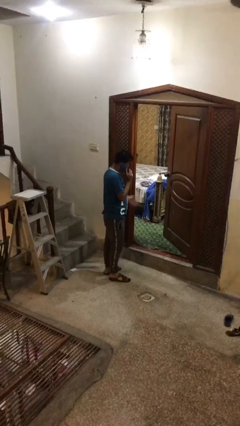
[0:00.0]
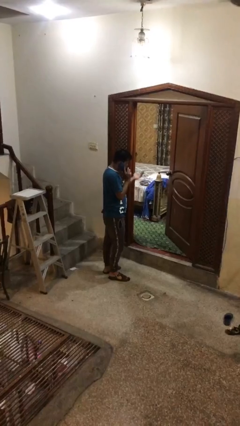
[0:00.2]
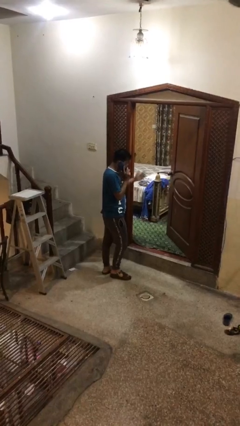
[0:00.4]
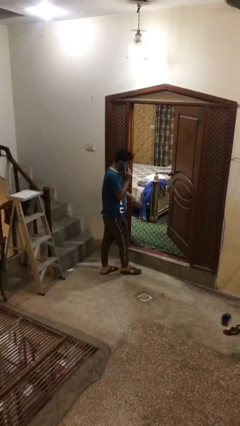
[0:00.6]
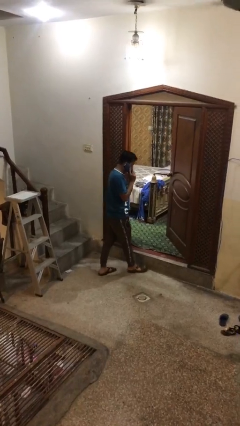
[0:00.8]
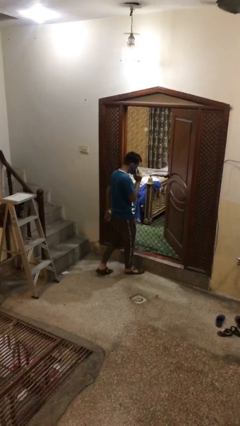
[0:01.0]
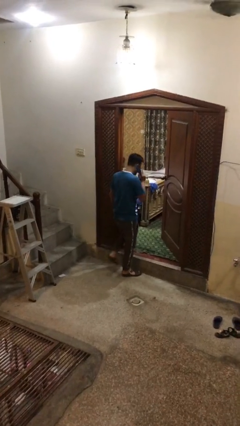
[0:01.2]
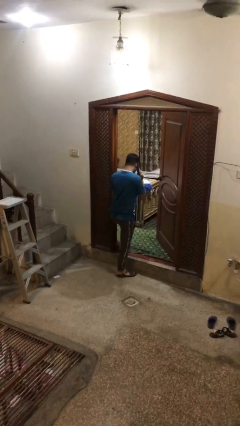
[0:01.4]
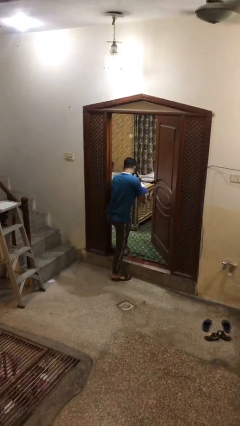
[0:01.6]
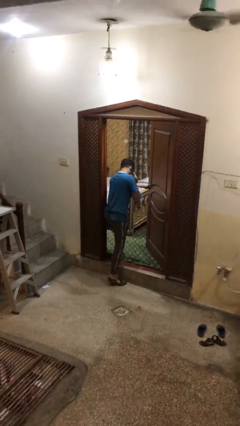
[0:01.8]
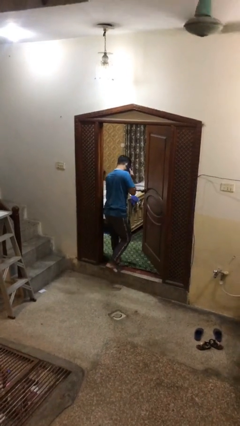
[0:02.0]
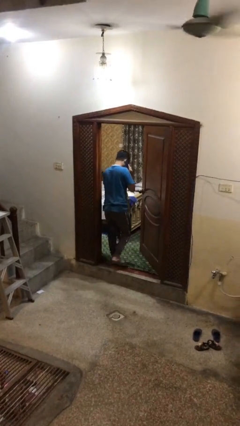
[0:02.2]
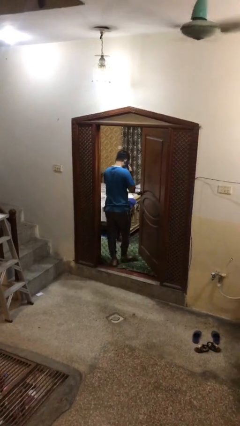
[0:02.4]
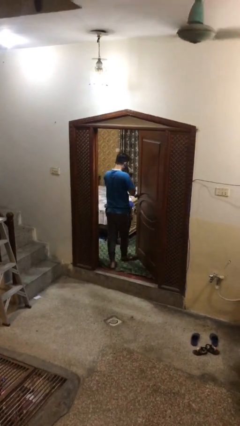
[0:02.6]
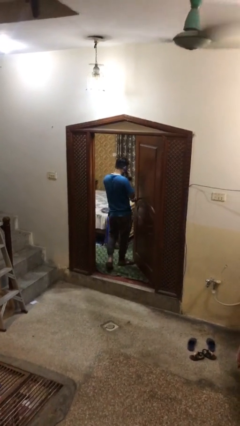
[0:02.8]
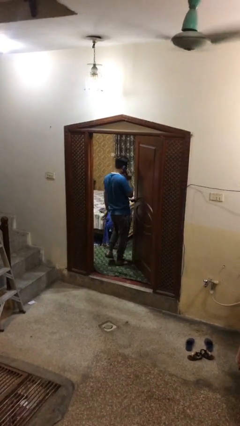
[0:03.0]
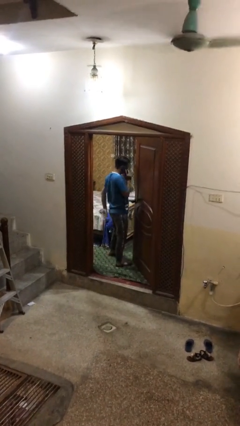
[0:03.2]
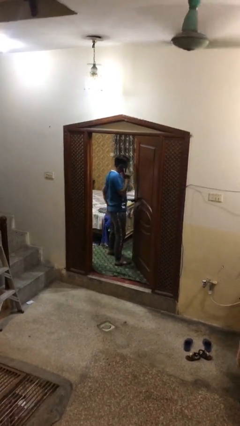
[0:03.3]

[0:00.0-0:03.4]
person exits scene through structure

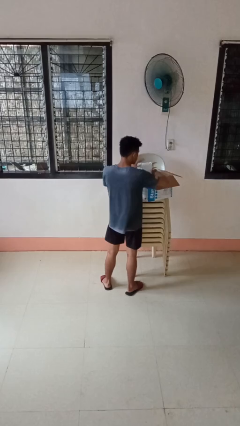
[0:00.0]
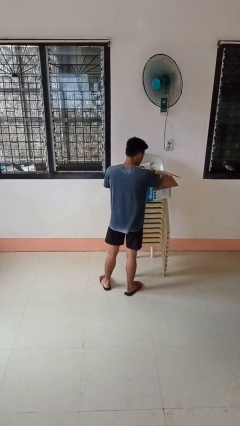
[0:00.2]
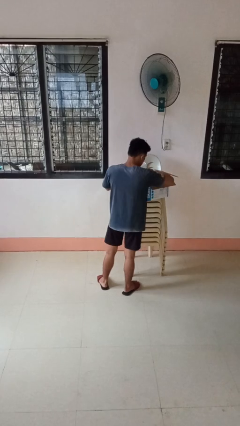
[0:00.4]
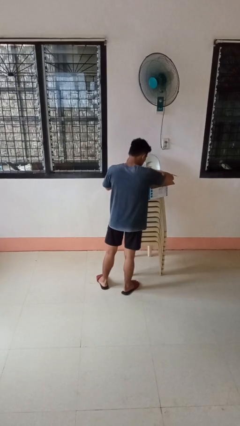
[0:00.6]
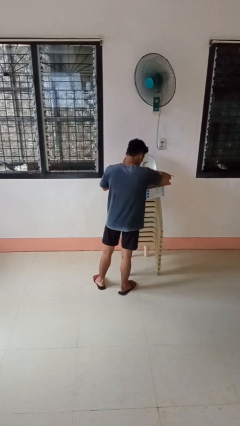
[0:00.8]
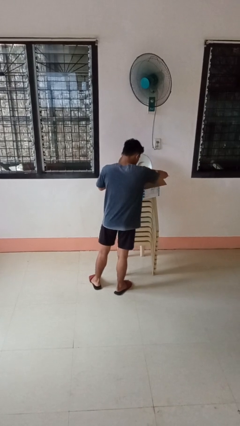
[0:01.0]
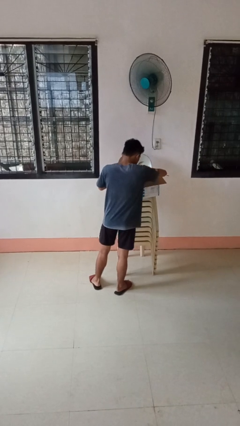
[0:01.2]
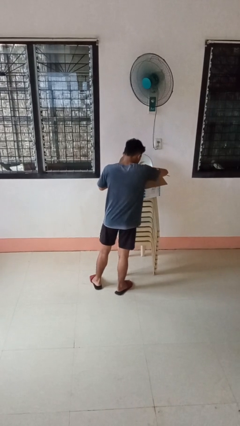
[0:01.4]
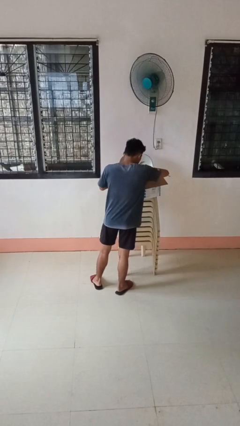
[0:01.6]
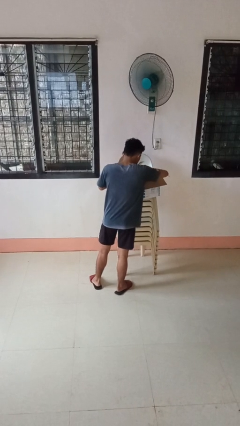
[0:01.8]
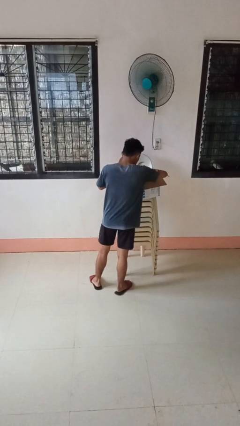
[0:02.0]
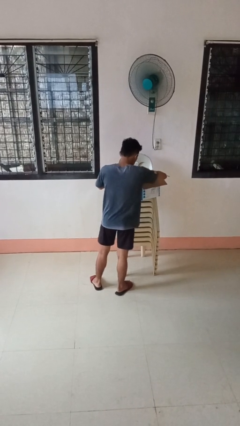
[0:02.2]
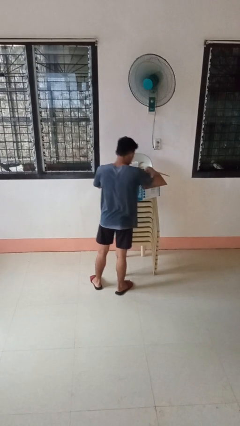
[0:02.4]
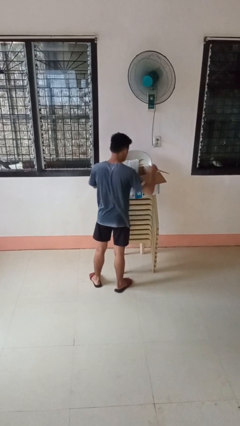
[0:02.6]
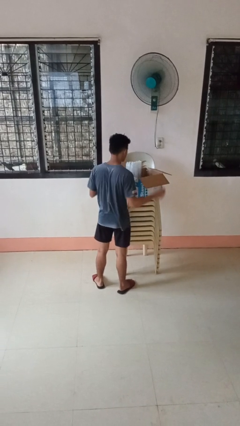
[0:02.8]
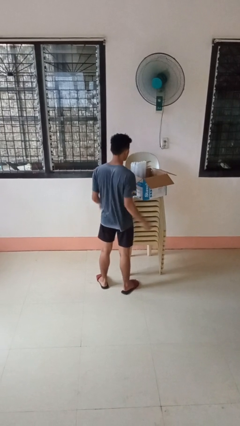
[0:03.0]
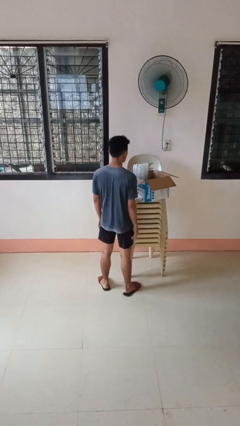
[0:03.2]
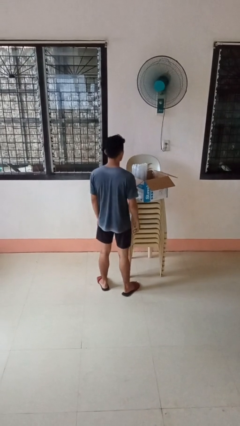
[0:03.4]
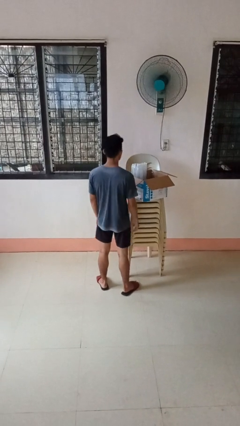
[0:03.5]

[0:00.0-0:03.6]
person searches in box

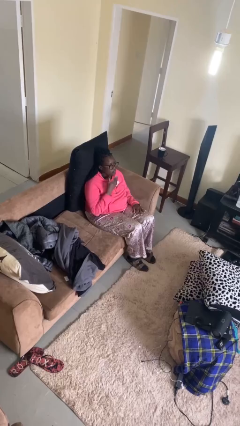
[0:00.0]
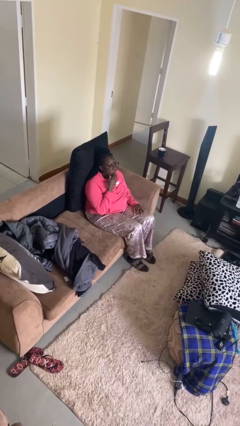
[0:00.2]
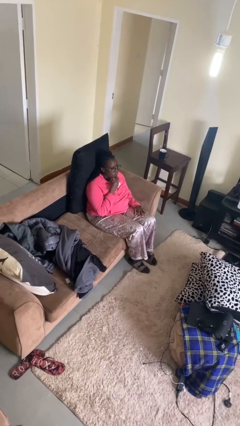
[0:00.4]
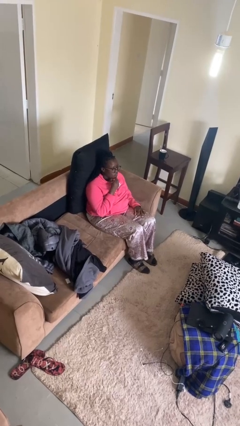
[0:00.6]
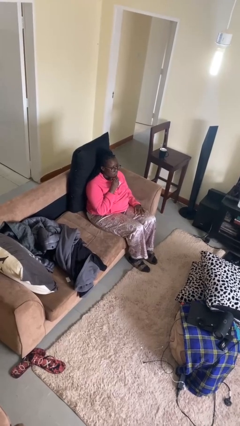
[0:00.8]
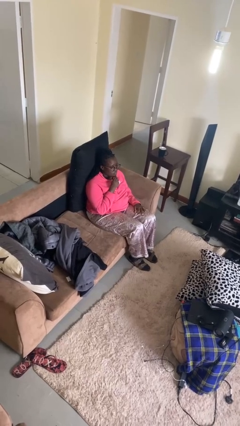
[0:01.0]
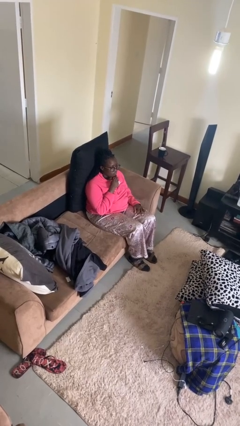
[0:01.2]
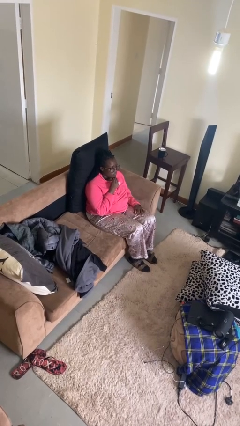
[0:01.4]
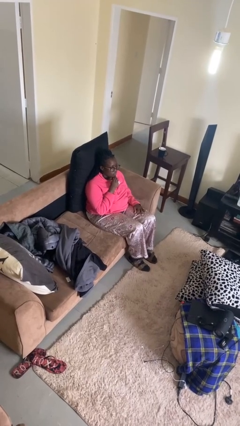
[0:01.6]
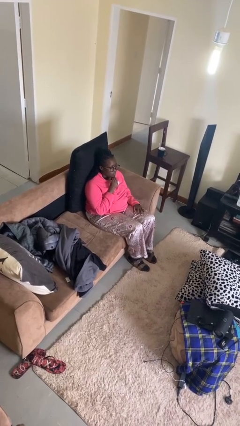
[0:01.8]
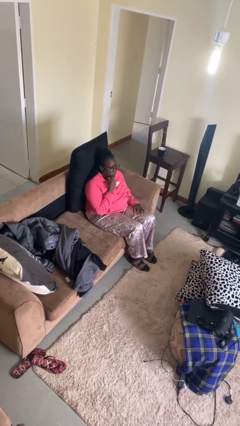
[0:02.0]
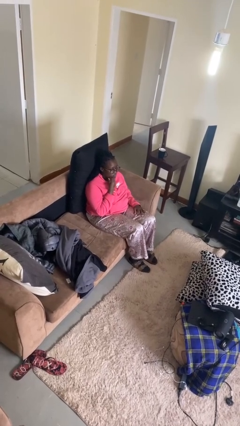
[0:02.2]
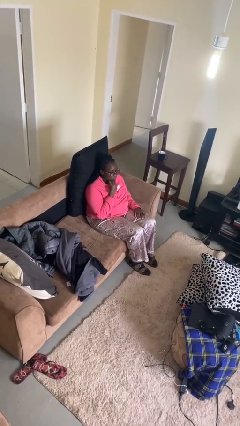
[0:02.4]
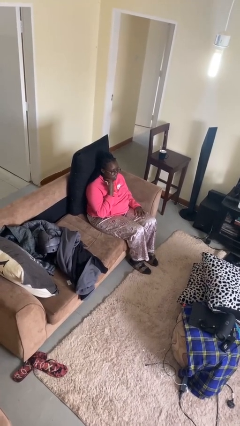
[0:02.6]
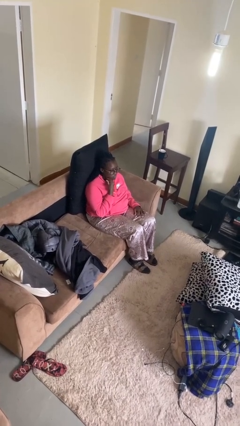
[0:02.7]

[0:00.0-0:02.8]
person strokes chin

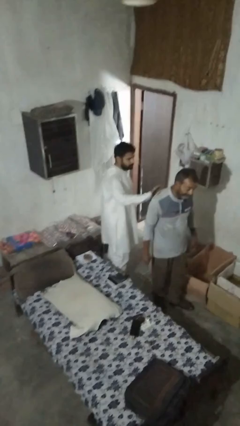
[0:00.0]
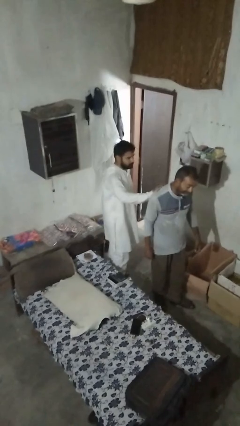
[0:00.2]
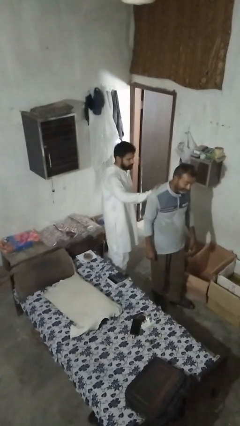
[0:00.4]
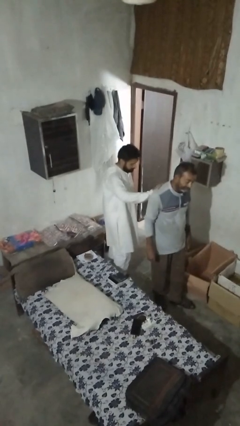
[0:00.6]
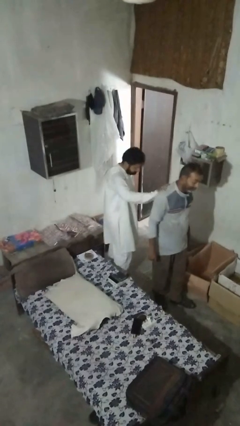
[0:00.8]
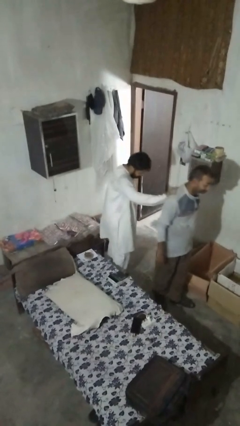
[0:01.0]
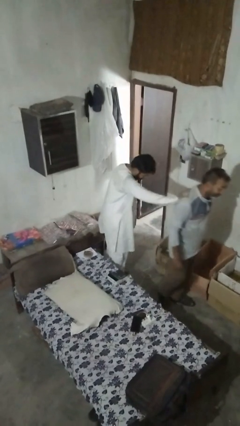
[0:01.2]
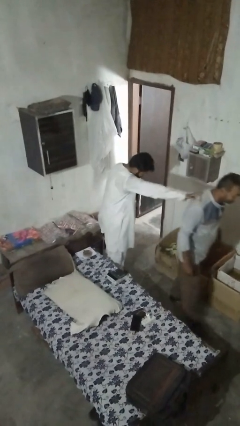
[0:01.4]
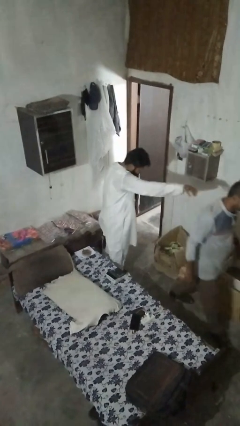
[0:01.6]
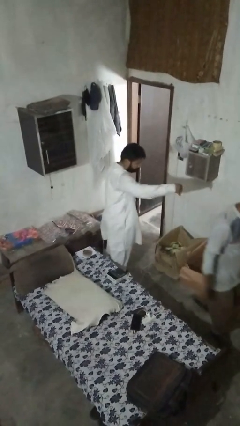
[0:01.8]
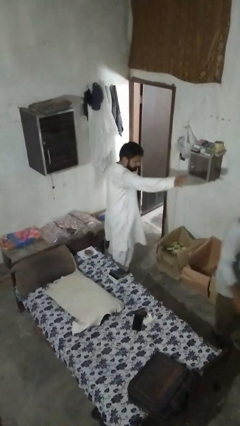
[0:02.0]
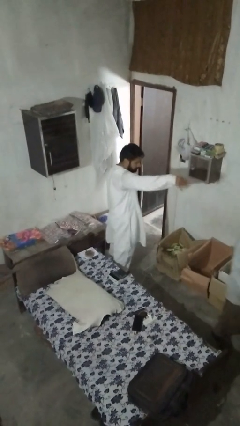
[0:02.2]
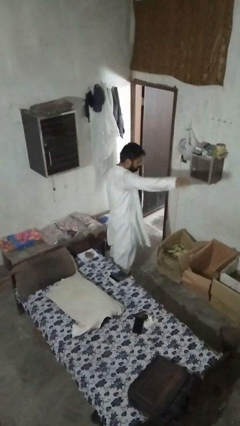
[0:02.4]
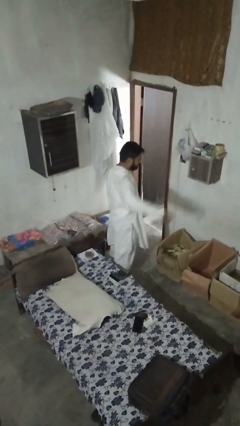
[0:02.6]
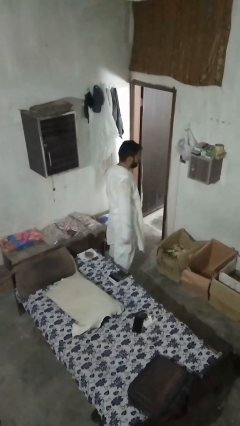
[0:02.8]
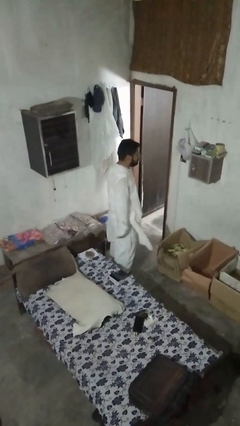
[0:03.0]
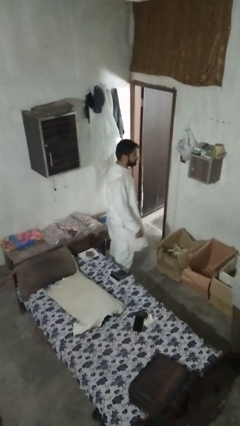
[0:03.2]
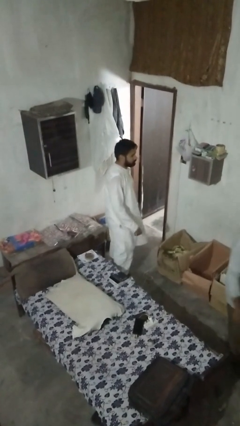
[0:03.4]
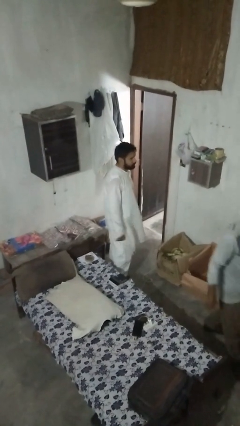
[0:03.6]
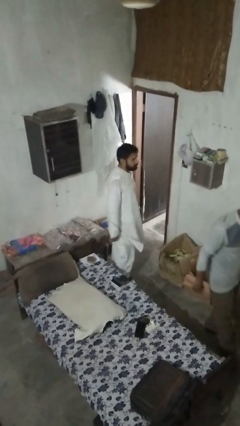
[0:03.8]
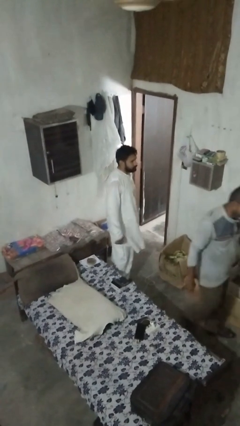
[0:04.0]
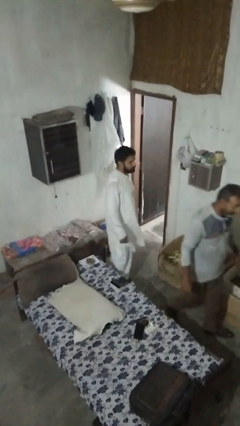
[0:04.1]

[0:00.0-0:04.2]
person shoves person

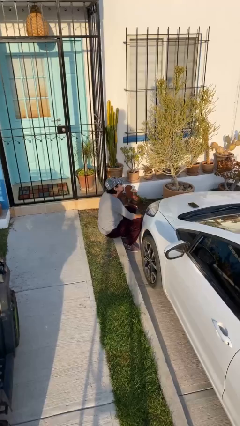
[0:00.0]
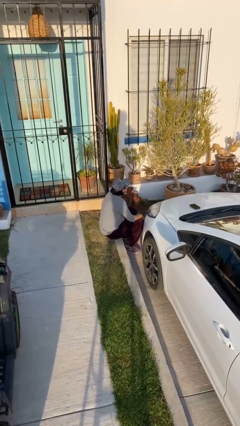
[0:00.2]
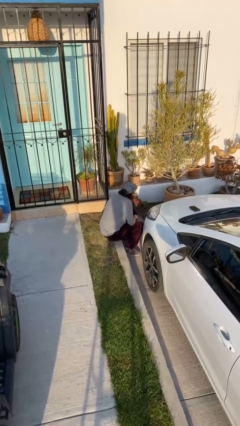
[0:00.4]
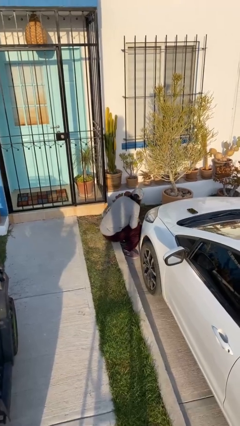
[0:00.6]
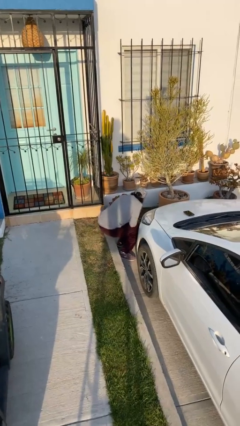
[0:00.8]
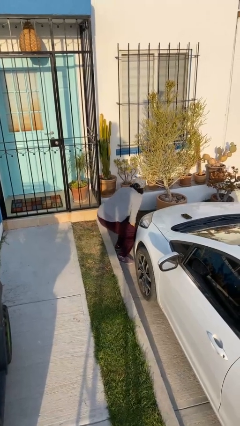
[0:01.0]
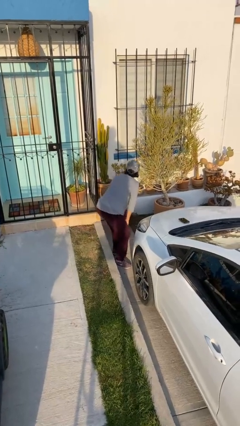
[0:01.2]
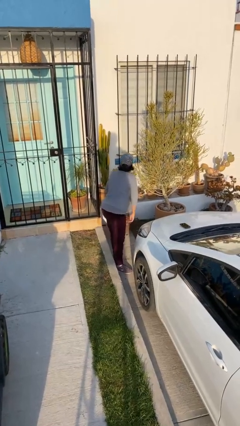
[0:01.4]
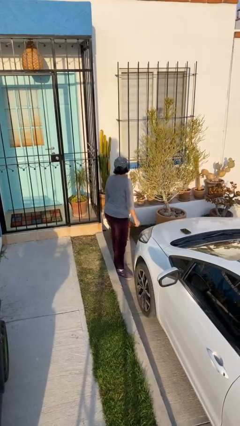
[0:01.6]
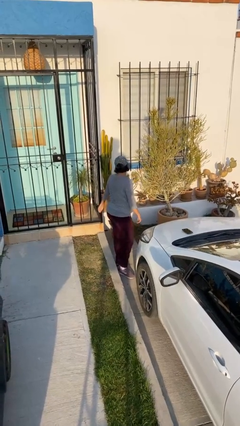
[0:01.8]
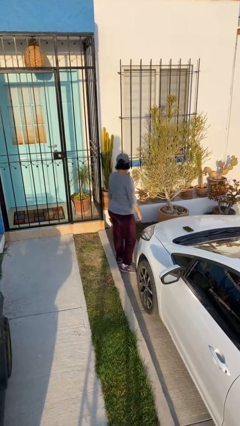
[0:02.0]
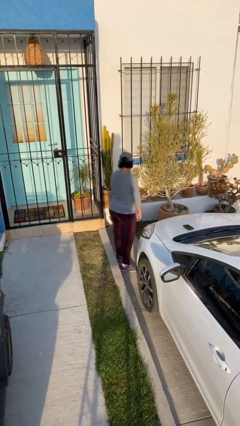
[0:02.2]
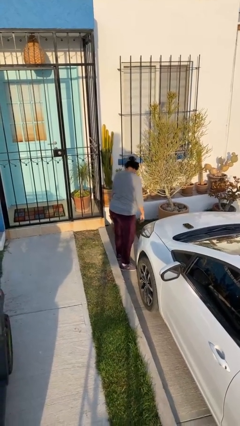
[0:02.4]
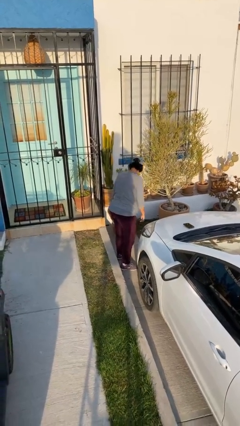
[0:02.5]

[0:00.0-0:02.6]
person stands up

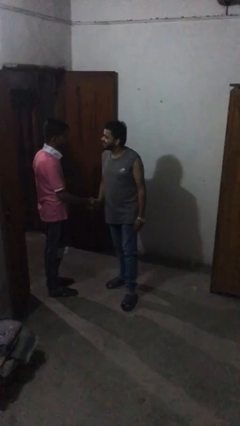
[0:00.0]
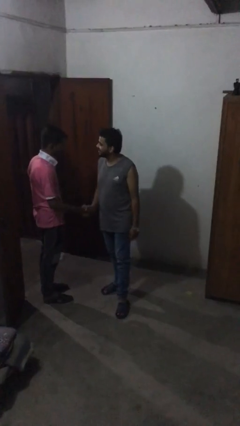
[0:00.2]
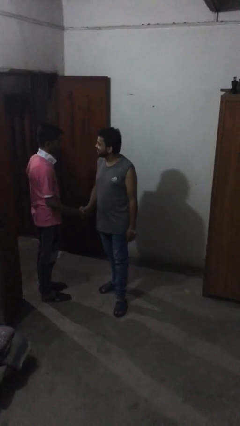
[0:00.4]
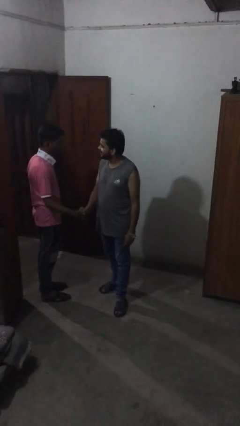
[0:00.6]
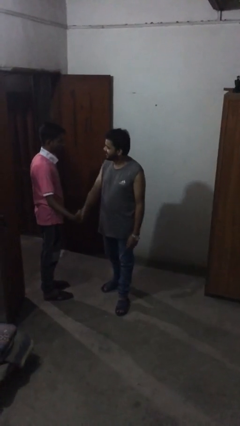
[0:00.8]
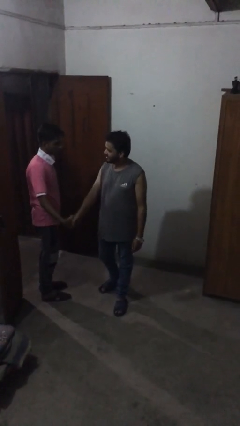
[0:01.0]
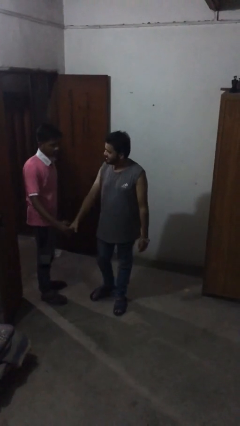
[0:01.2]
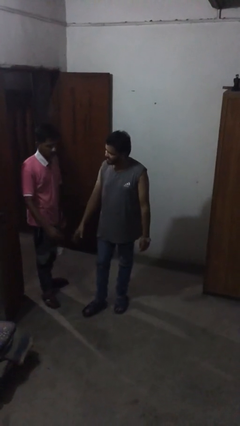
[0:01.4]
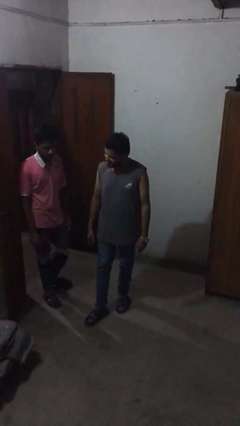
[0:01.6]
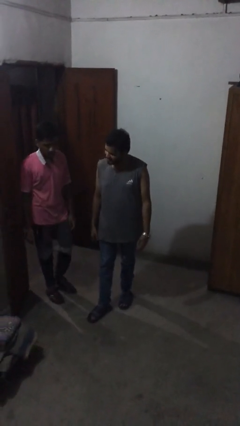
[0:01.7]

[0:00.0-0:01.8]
person shakes hand
